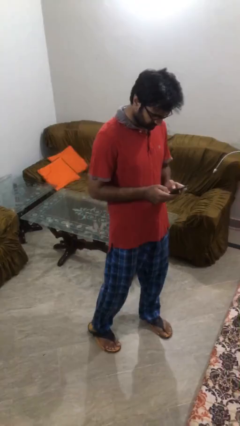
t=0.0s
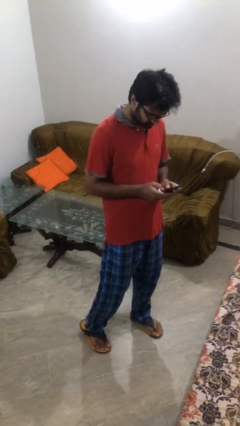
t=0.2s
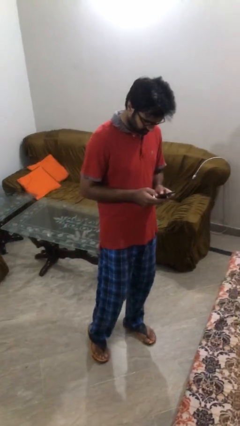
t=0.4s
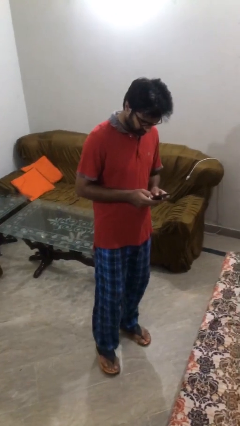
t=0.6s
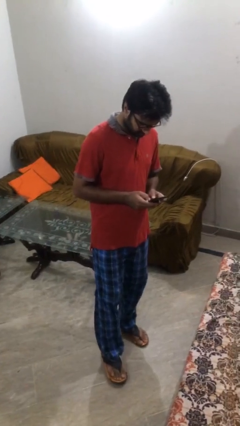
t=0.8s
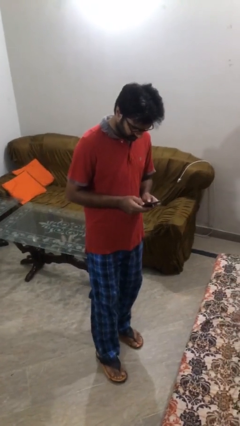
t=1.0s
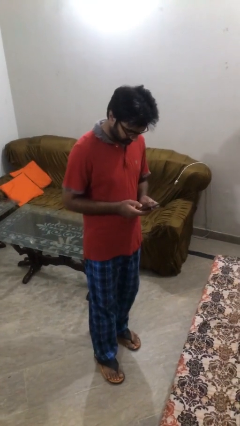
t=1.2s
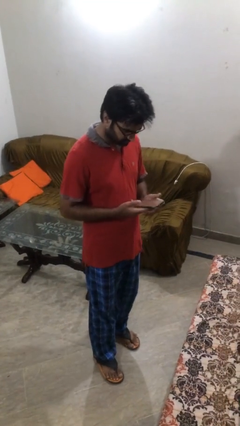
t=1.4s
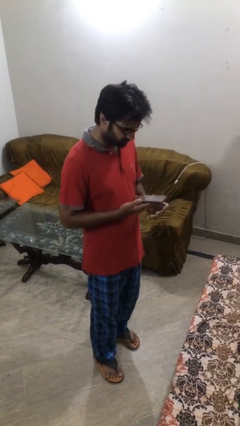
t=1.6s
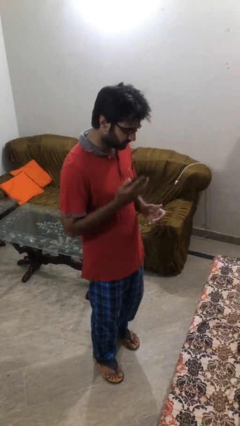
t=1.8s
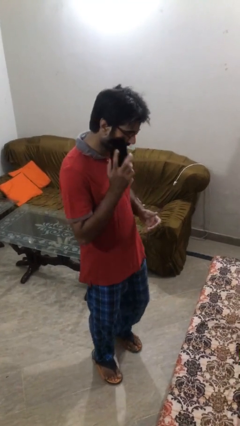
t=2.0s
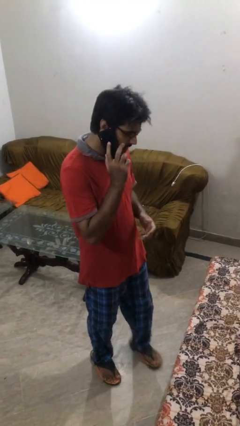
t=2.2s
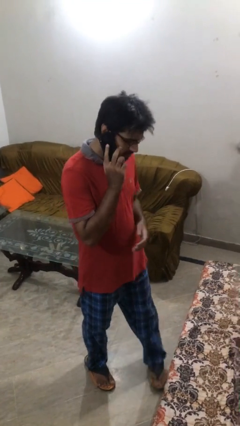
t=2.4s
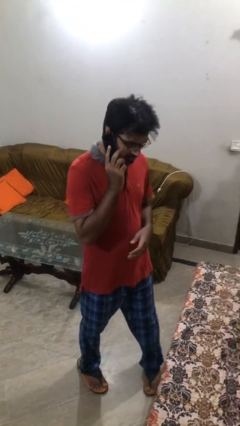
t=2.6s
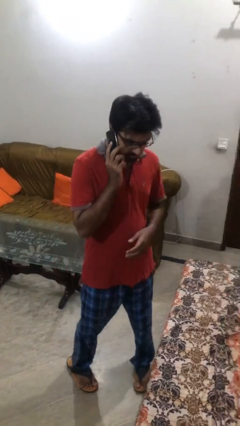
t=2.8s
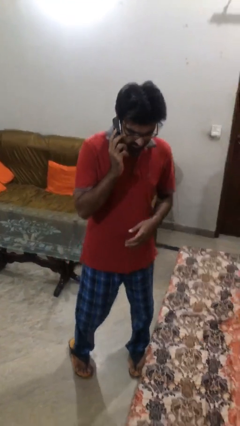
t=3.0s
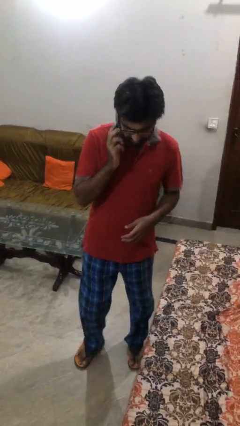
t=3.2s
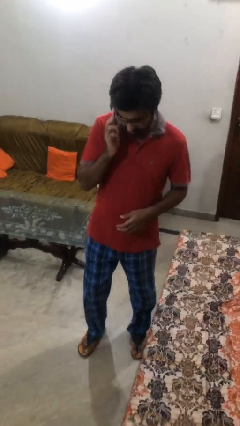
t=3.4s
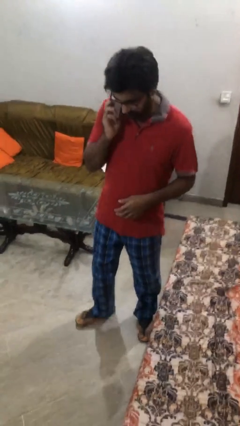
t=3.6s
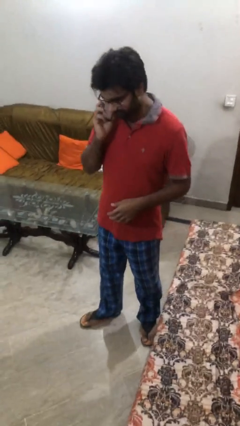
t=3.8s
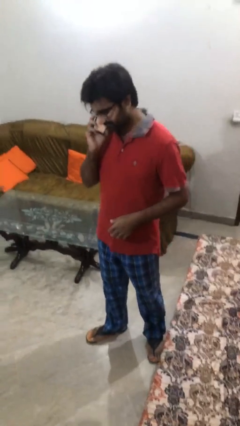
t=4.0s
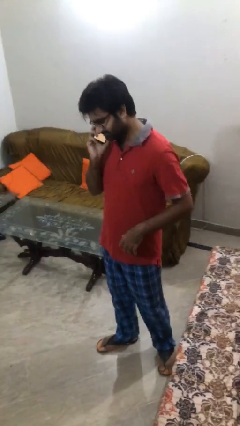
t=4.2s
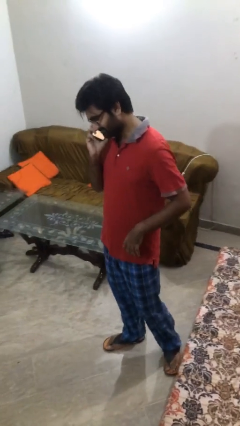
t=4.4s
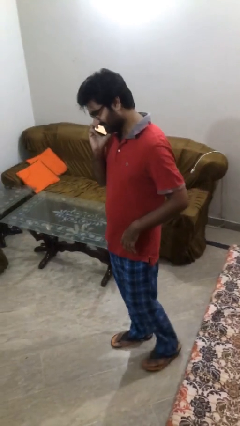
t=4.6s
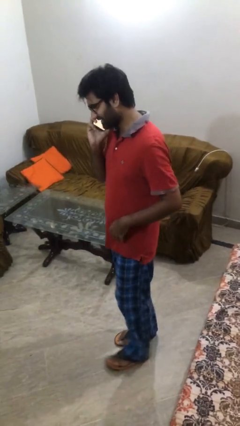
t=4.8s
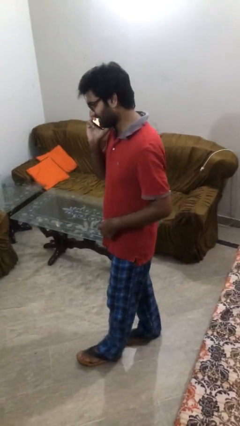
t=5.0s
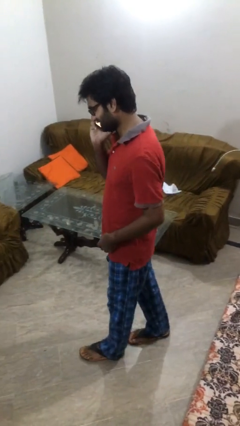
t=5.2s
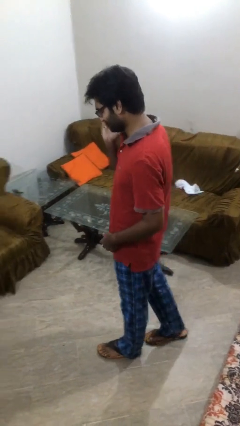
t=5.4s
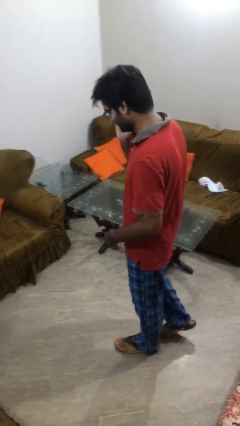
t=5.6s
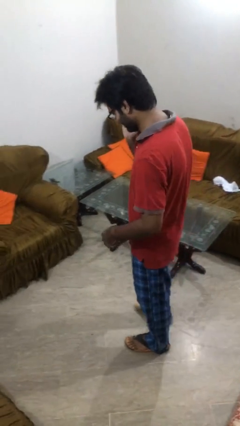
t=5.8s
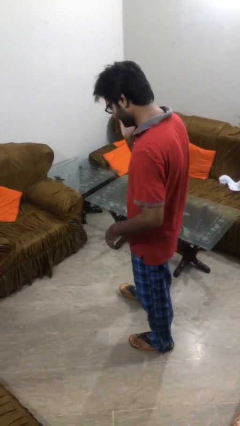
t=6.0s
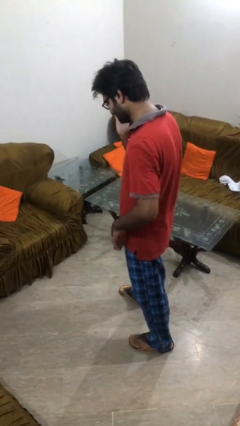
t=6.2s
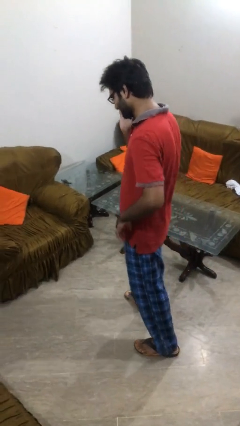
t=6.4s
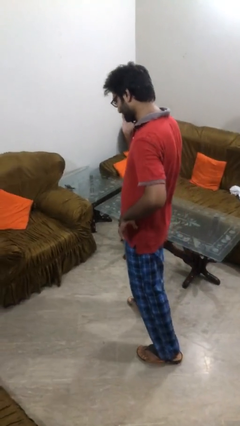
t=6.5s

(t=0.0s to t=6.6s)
person talks on phone

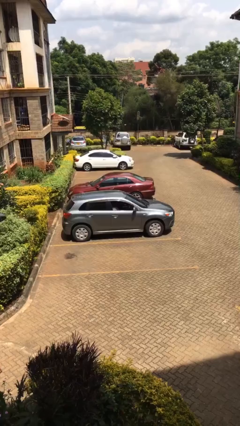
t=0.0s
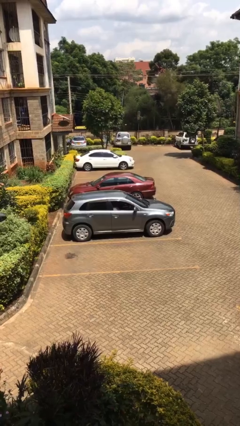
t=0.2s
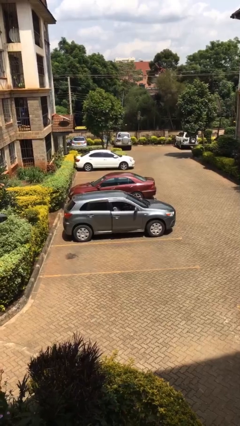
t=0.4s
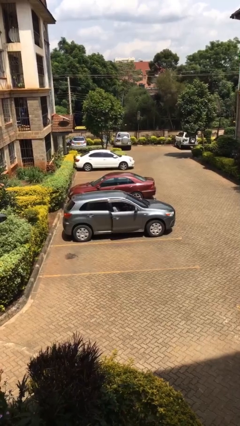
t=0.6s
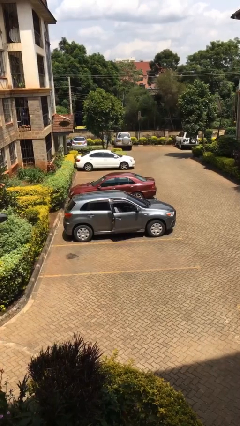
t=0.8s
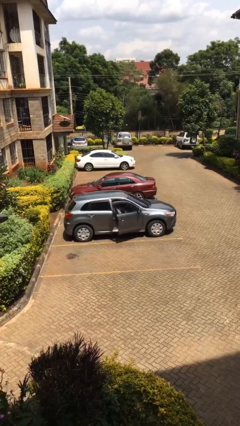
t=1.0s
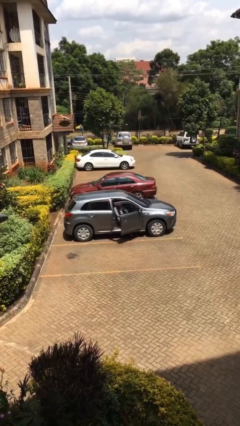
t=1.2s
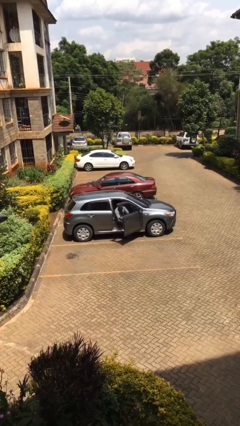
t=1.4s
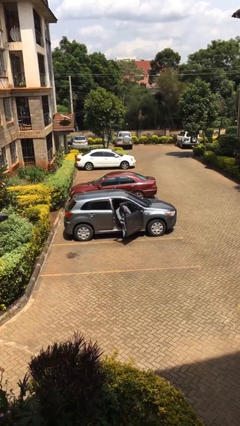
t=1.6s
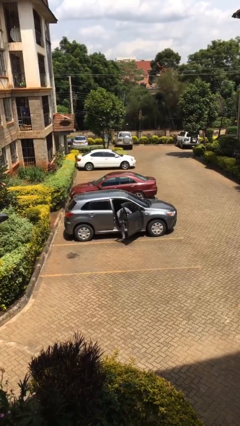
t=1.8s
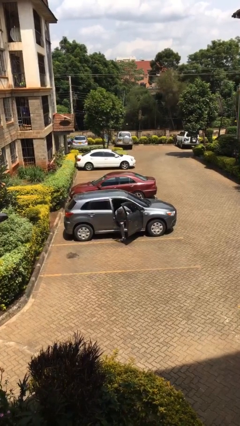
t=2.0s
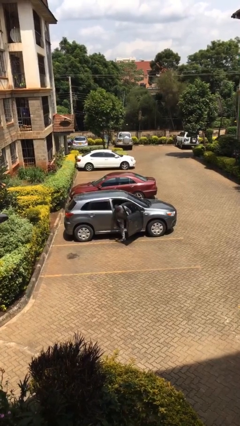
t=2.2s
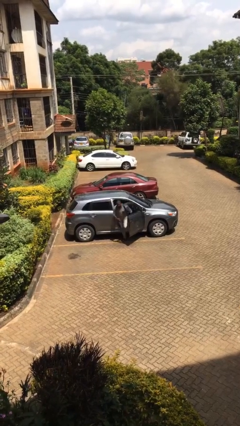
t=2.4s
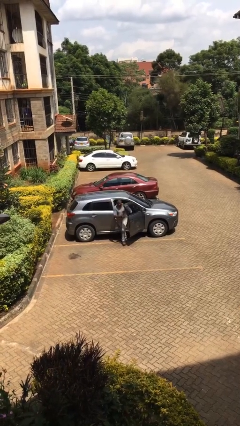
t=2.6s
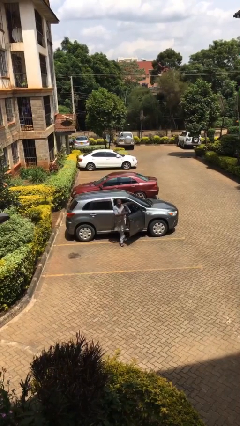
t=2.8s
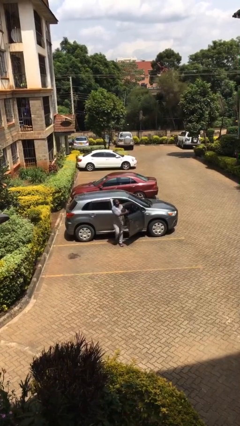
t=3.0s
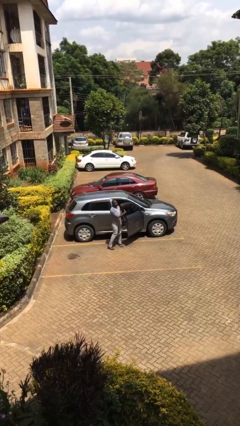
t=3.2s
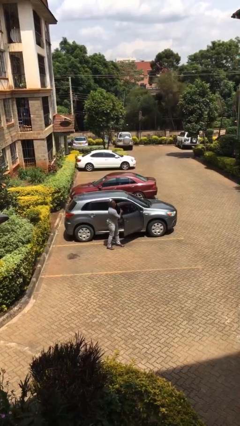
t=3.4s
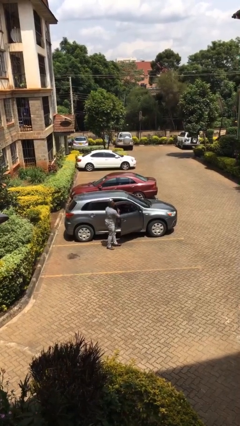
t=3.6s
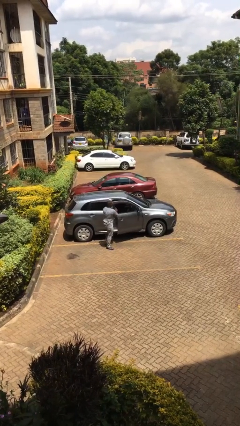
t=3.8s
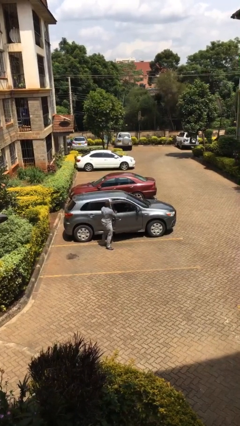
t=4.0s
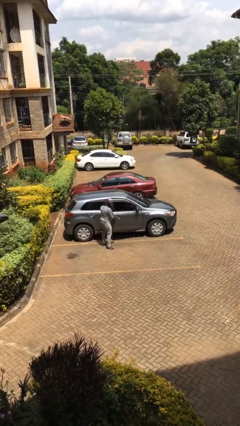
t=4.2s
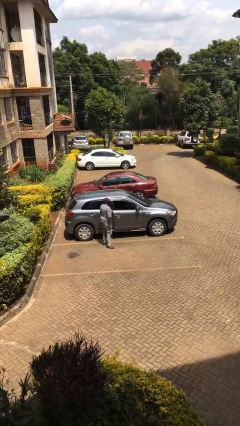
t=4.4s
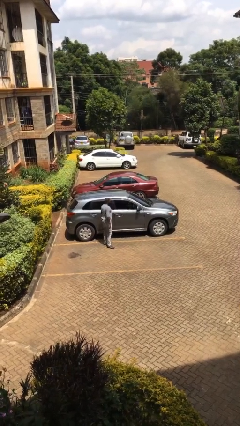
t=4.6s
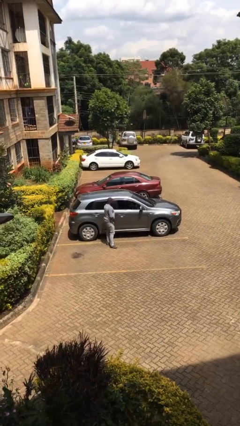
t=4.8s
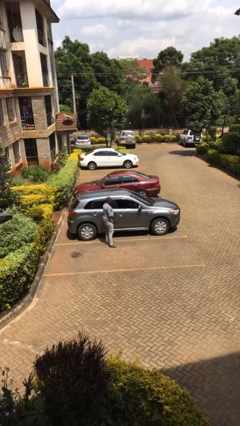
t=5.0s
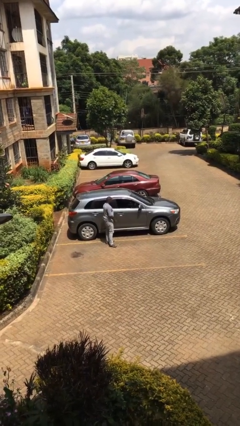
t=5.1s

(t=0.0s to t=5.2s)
car drops off person

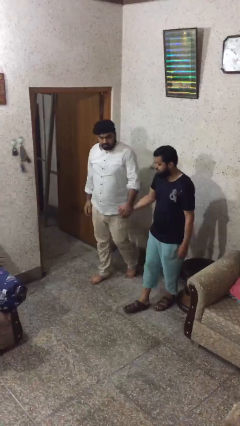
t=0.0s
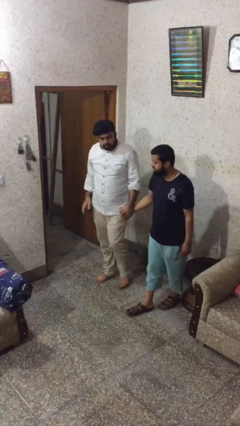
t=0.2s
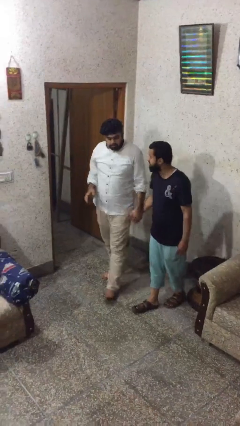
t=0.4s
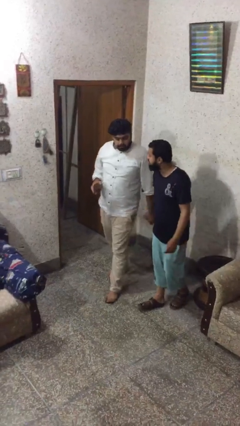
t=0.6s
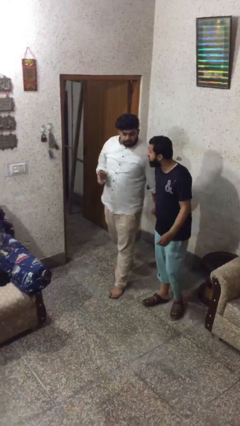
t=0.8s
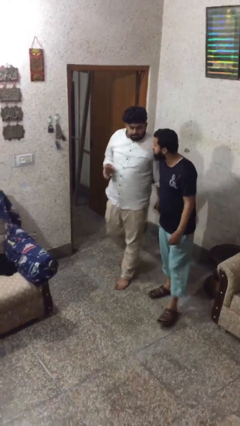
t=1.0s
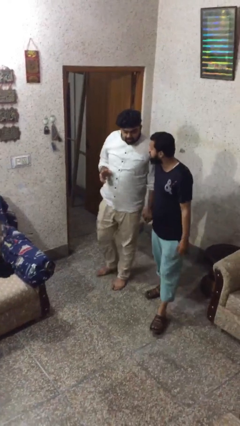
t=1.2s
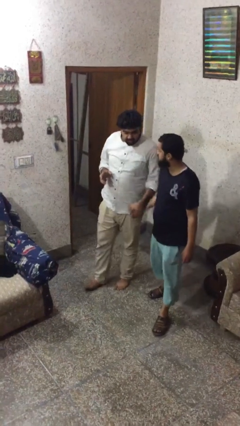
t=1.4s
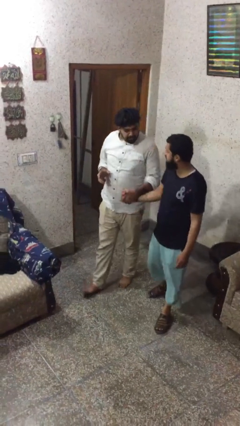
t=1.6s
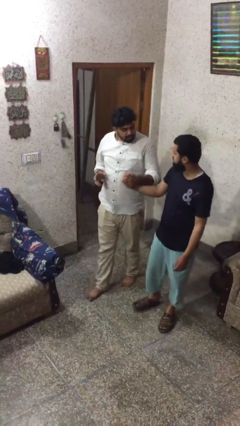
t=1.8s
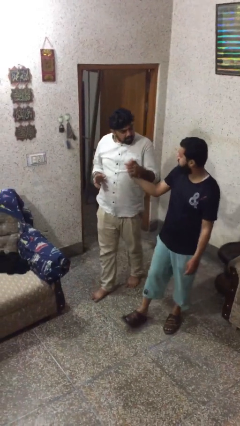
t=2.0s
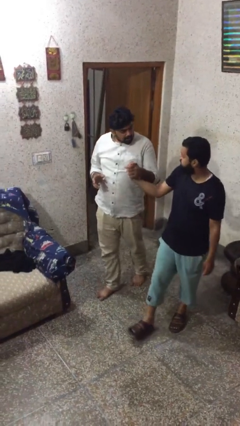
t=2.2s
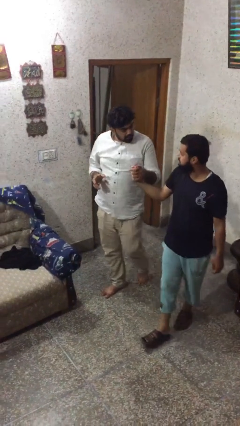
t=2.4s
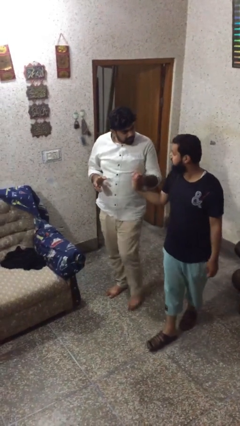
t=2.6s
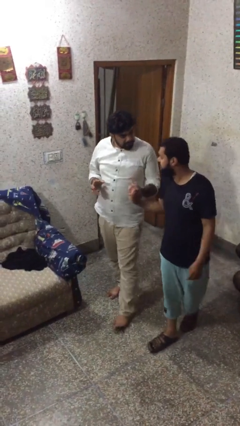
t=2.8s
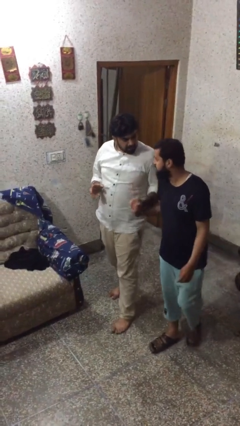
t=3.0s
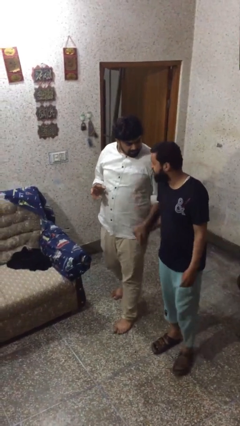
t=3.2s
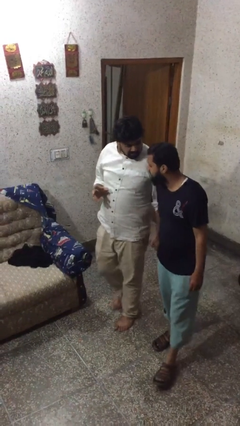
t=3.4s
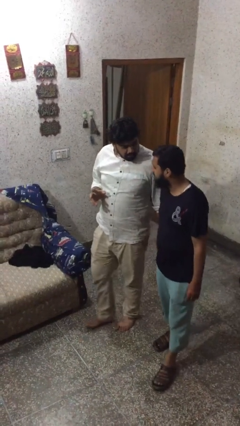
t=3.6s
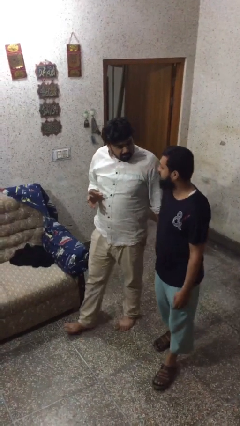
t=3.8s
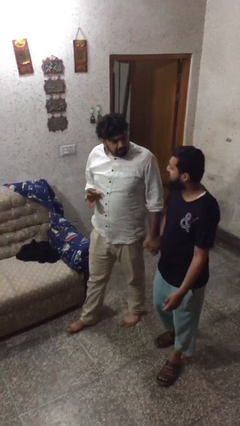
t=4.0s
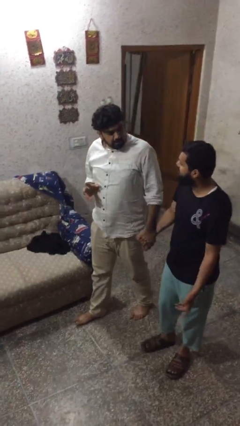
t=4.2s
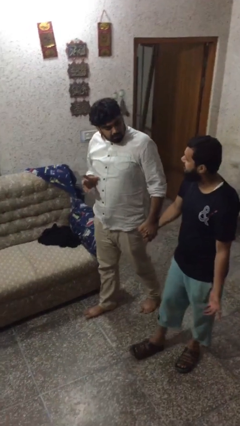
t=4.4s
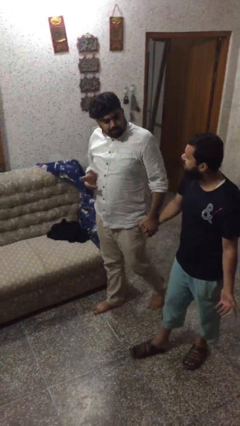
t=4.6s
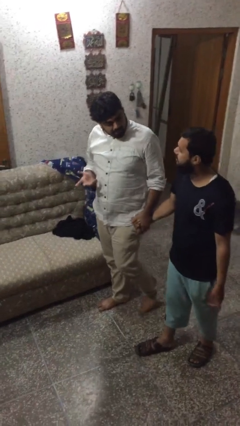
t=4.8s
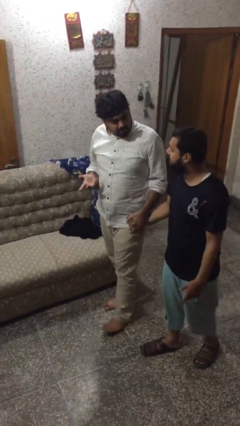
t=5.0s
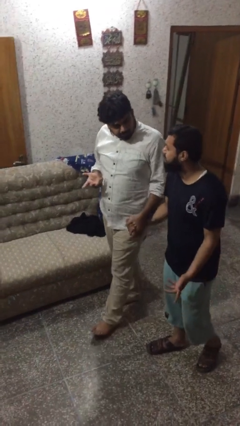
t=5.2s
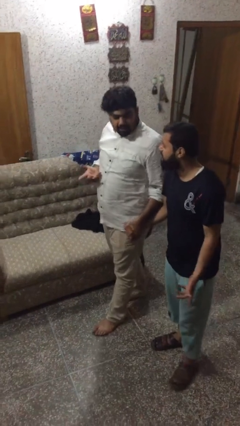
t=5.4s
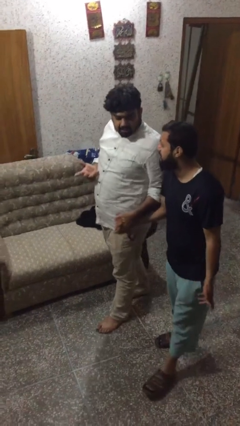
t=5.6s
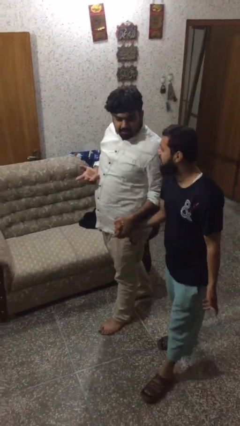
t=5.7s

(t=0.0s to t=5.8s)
person holds hand

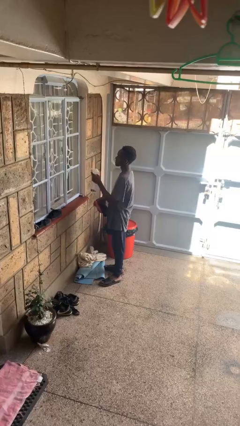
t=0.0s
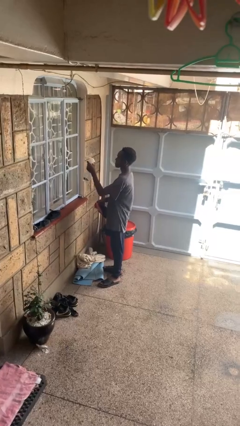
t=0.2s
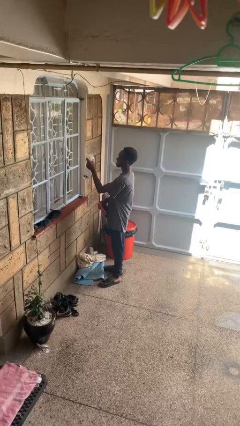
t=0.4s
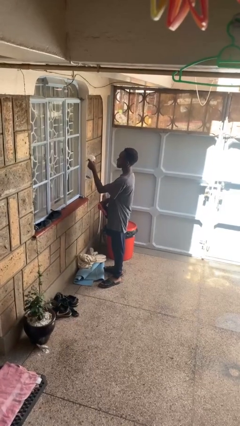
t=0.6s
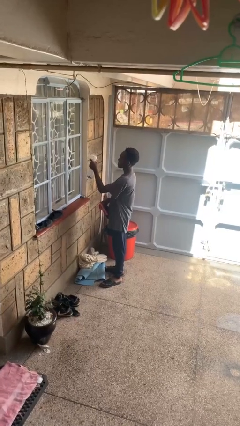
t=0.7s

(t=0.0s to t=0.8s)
person sprays from bottle
